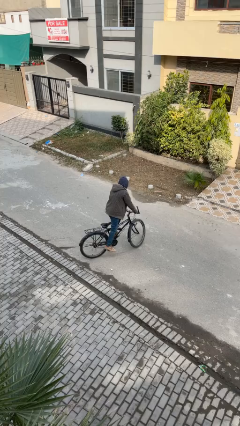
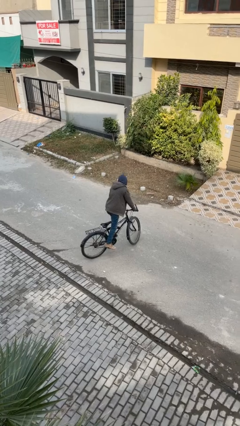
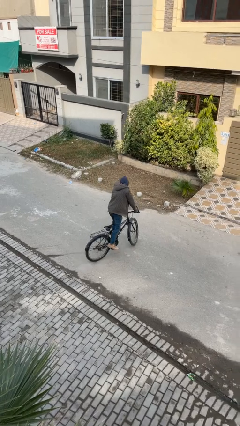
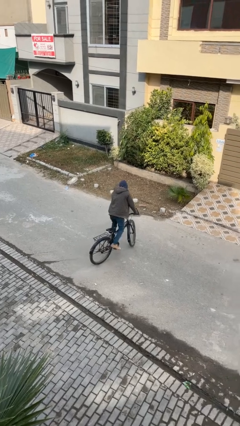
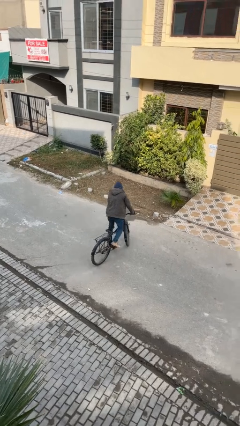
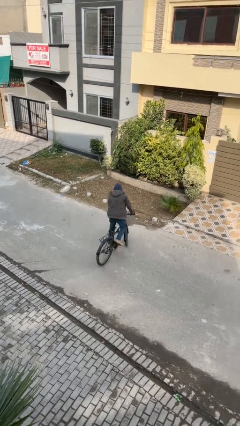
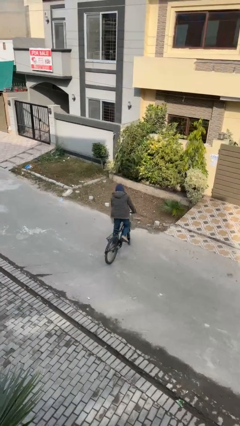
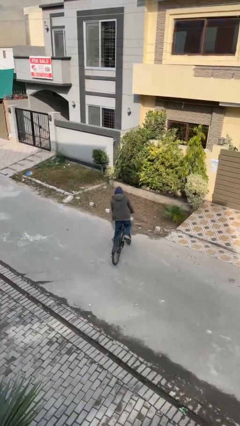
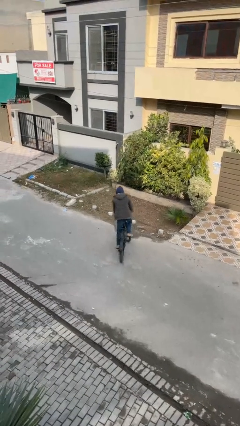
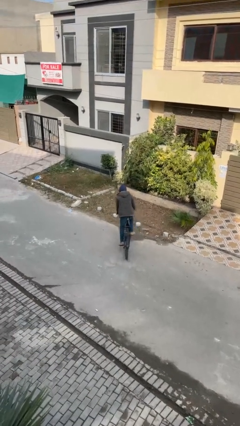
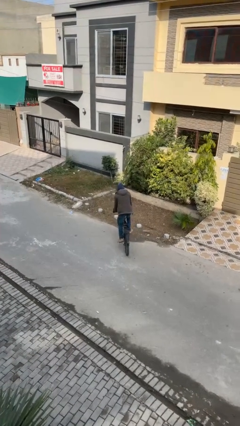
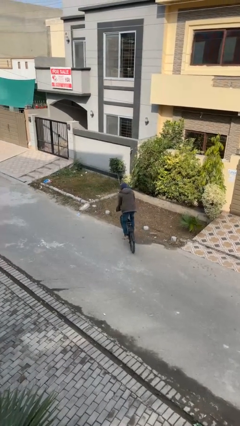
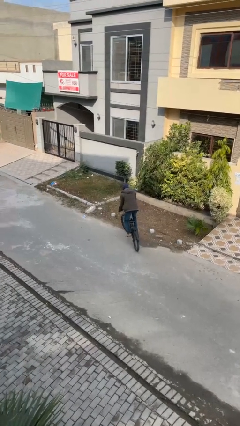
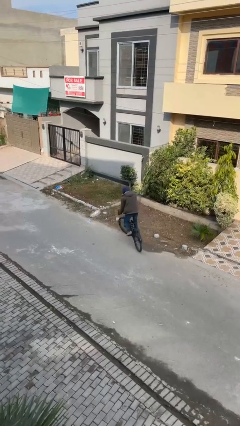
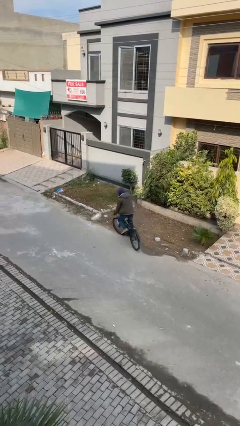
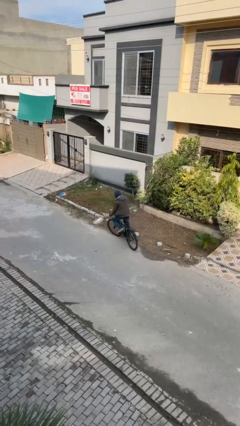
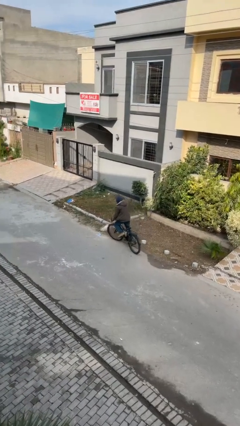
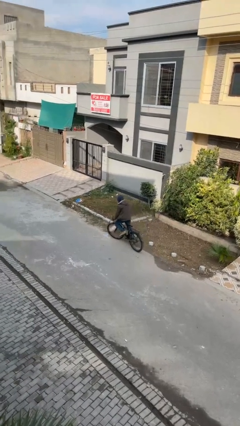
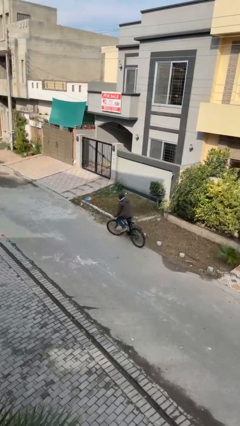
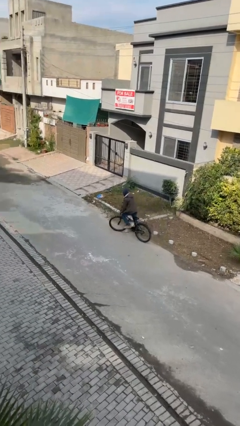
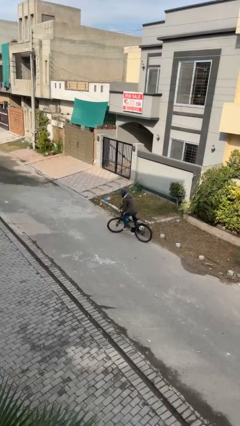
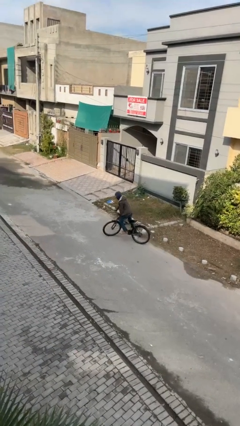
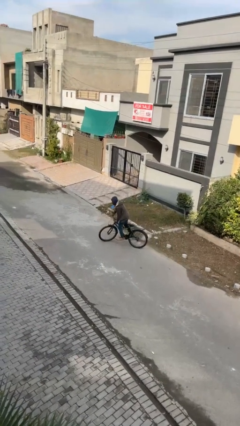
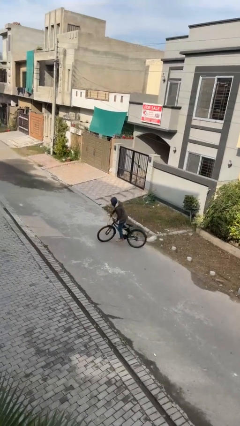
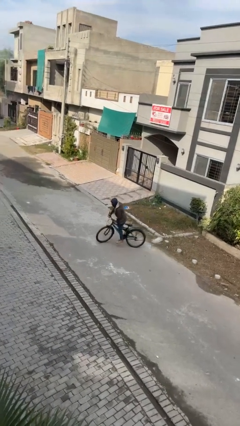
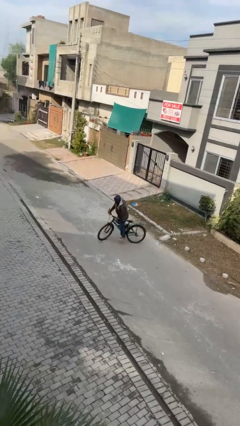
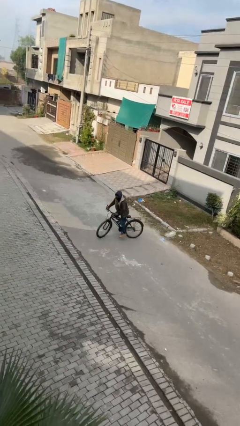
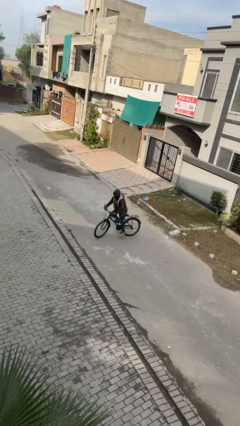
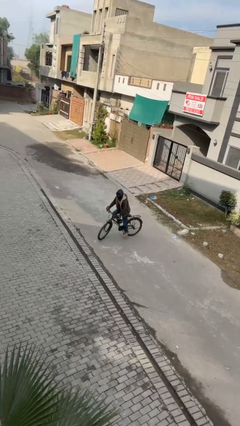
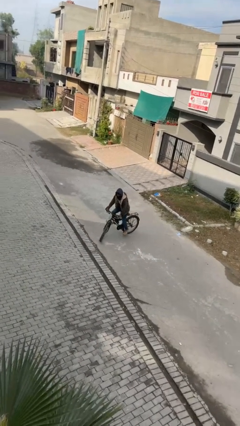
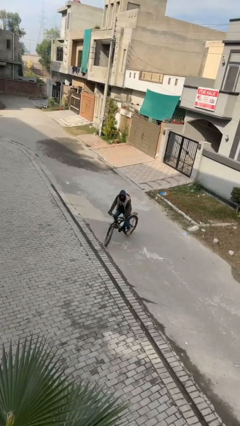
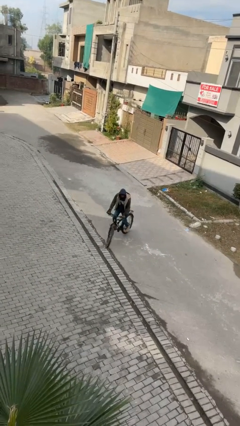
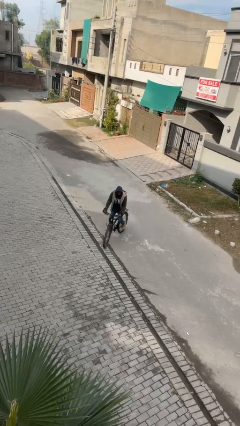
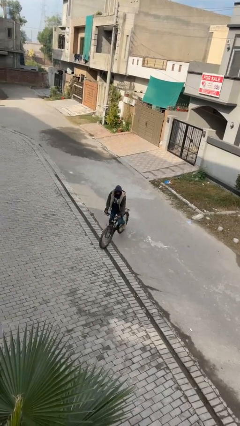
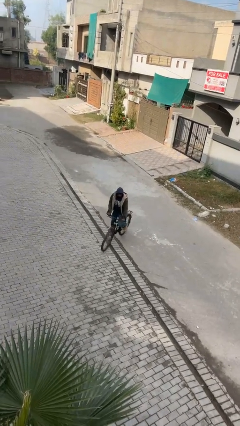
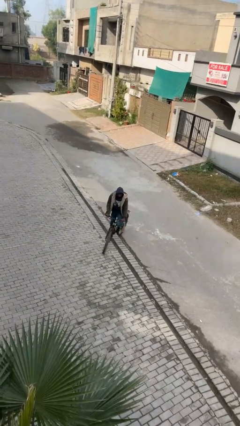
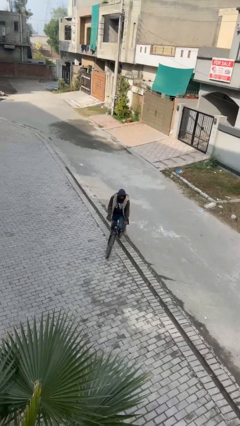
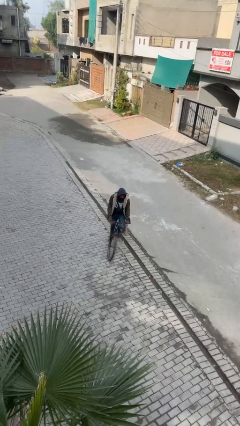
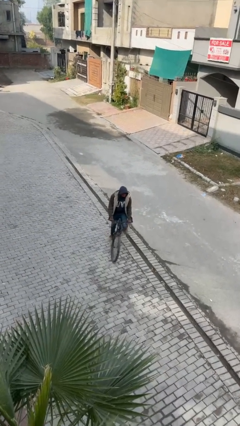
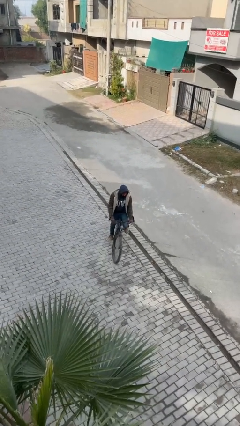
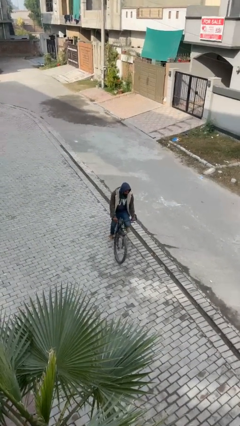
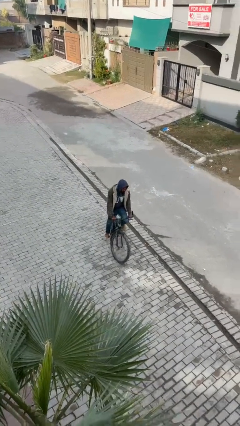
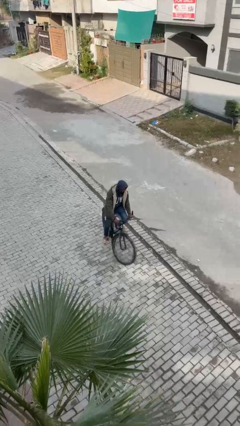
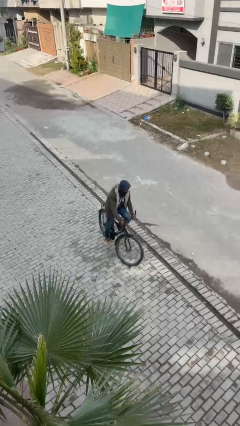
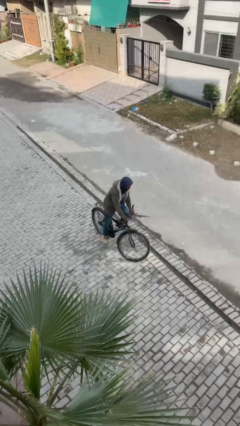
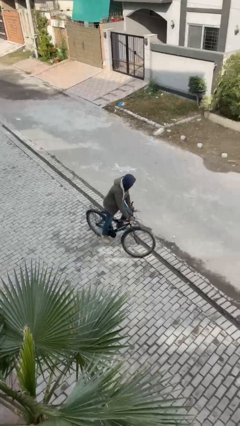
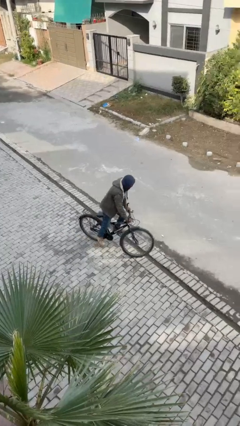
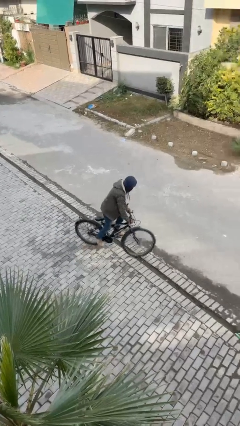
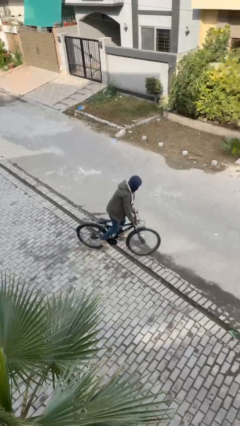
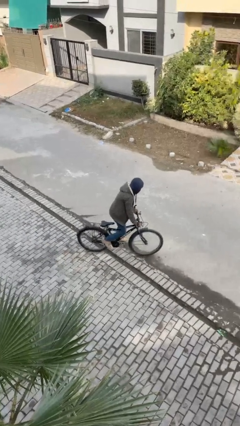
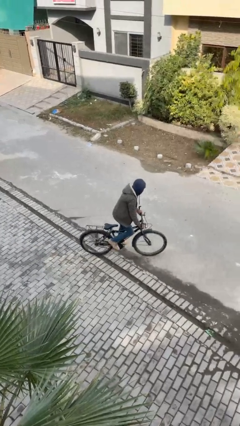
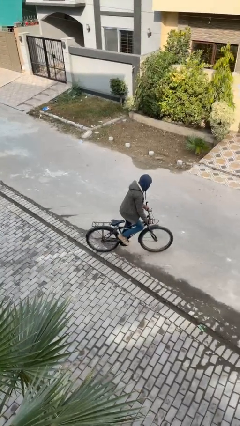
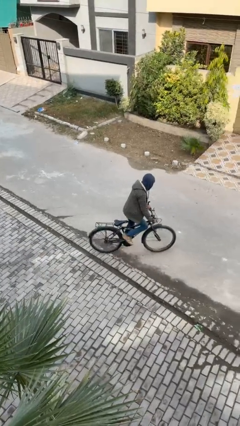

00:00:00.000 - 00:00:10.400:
person rides bicycle

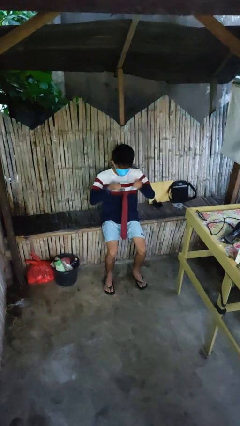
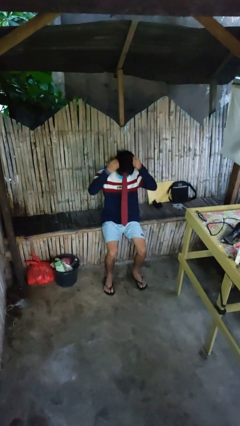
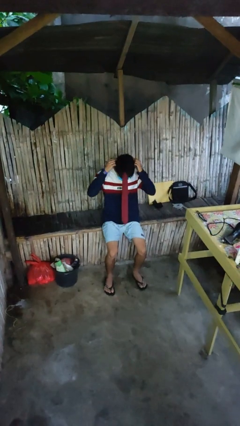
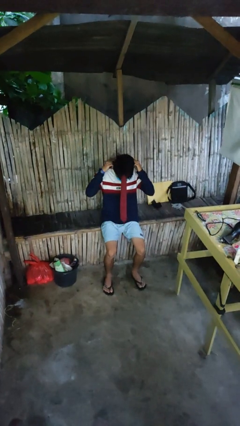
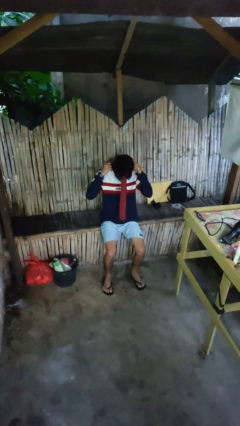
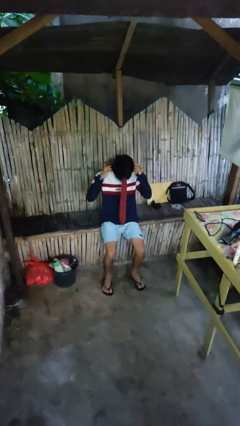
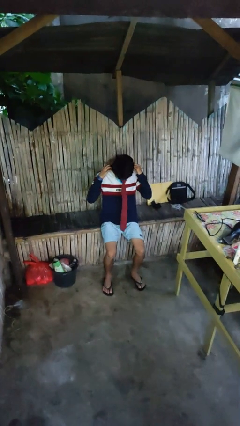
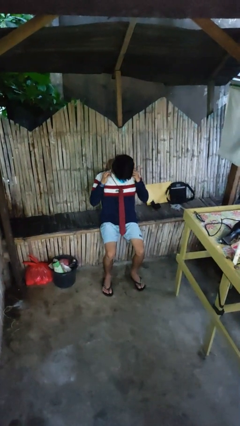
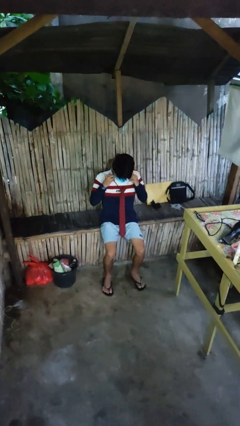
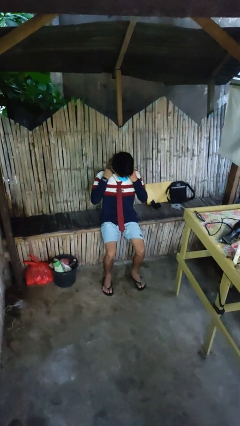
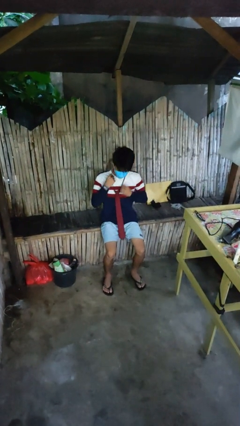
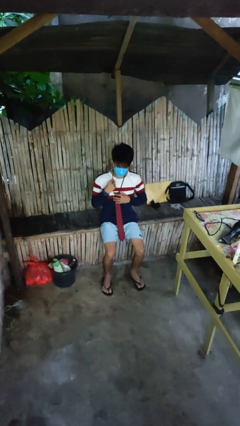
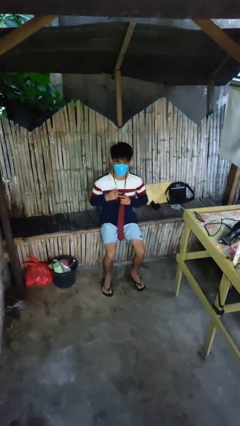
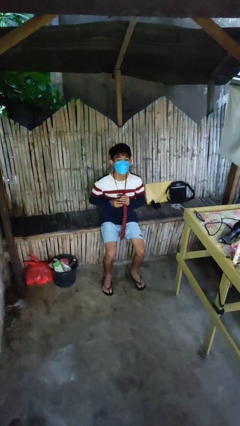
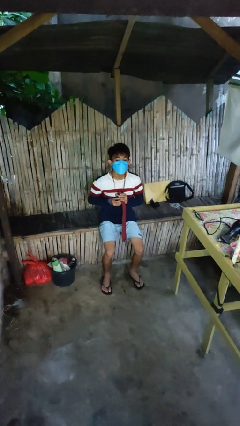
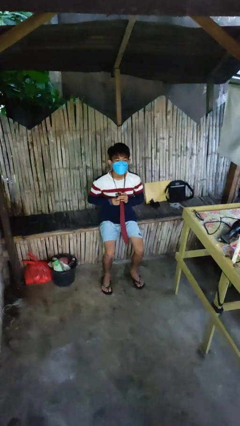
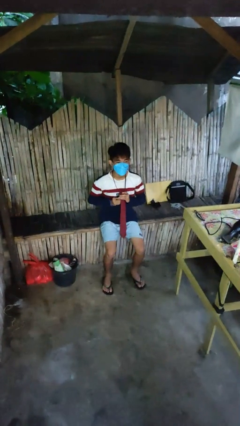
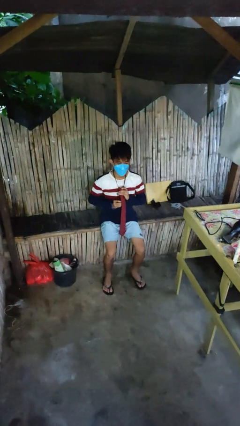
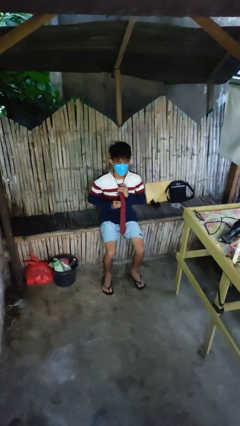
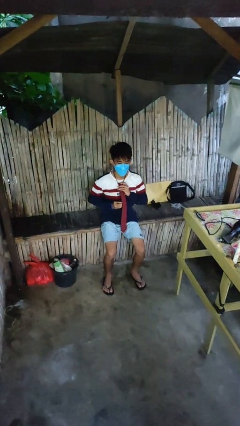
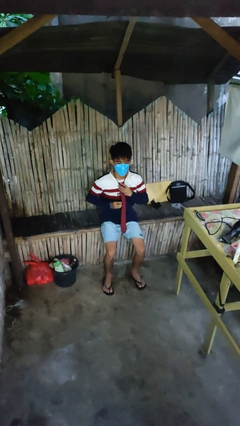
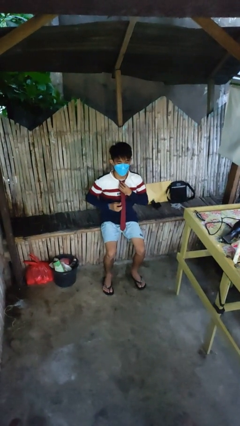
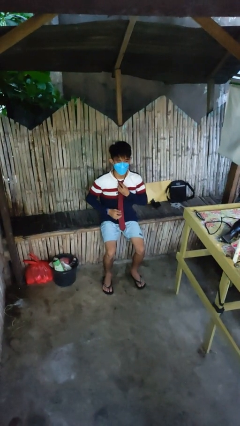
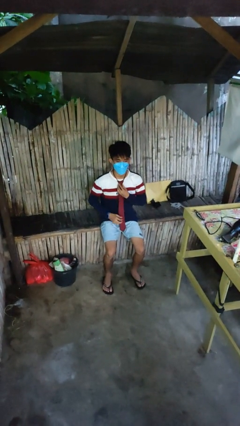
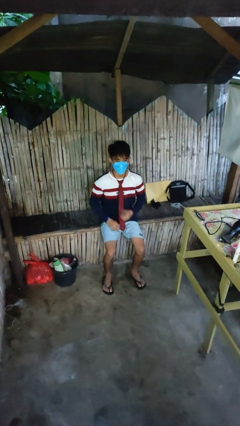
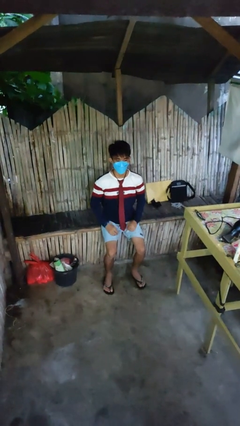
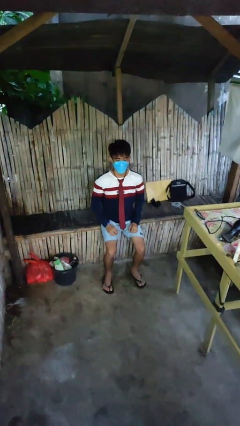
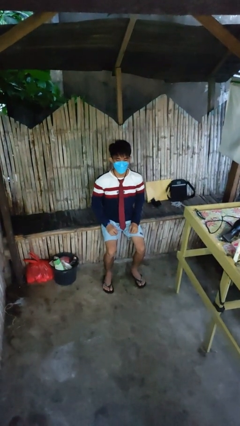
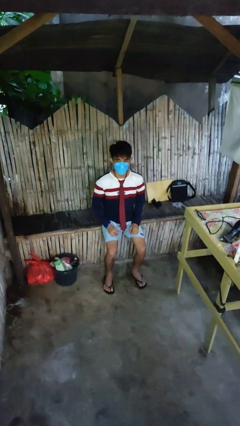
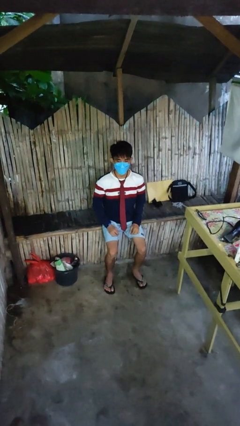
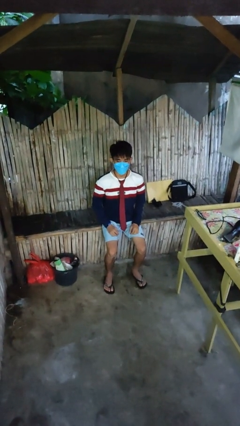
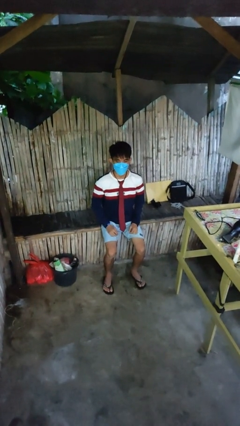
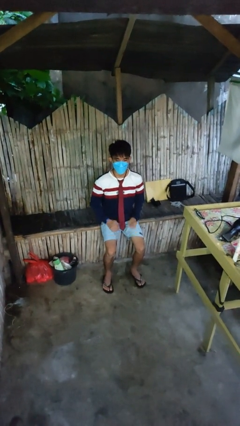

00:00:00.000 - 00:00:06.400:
person puts on necktie

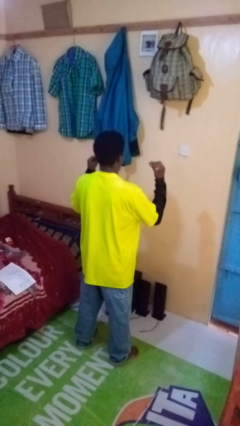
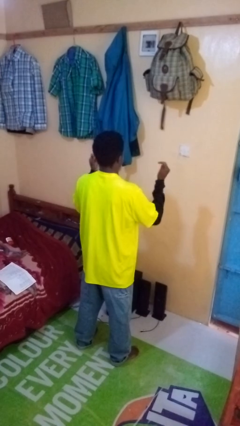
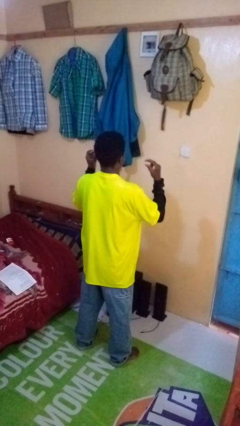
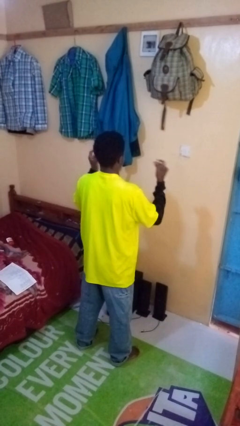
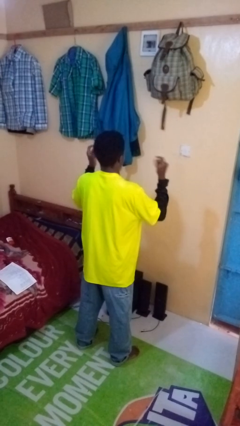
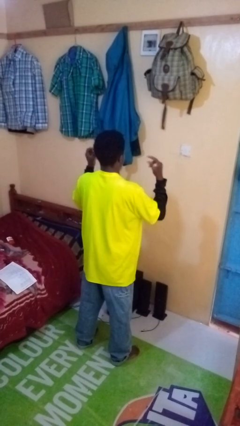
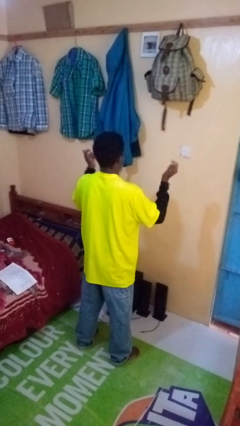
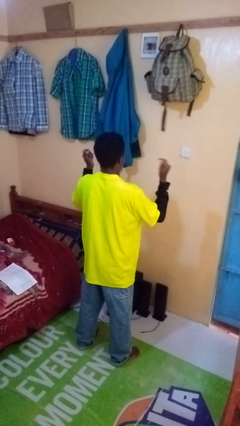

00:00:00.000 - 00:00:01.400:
person snaps fingers
